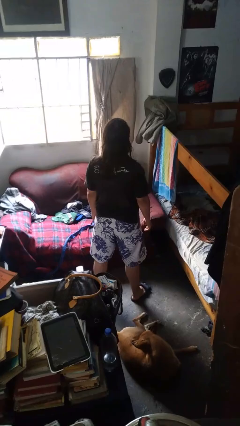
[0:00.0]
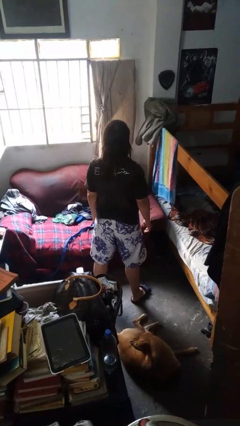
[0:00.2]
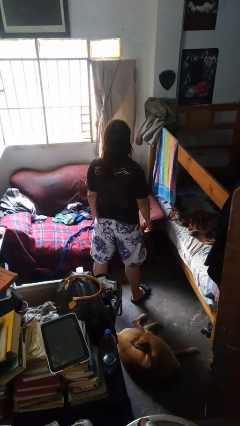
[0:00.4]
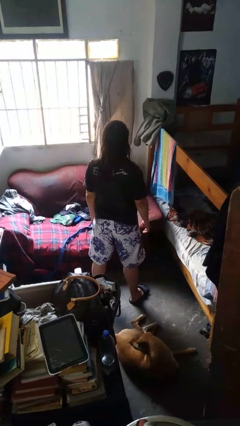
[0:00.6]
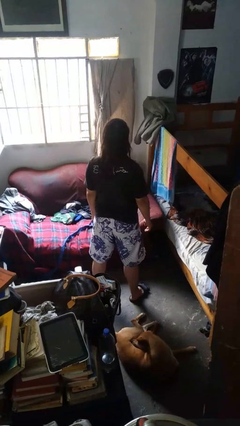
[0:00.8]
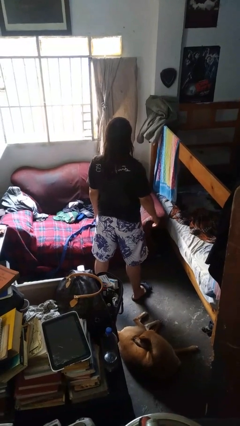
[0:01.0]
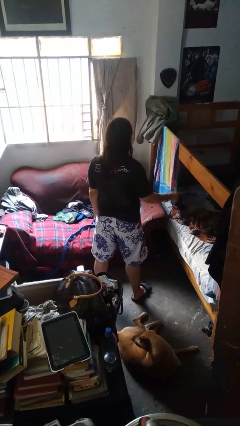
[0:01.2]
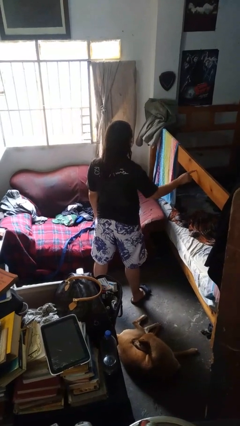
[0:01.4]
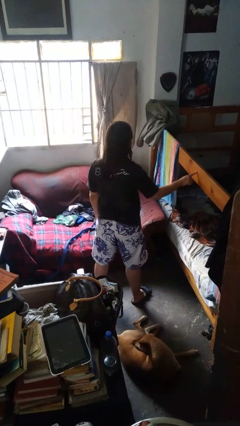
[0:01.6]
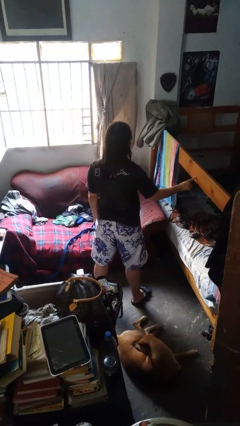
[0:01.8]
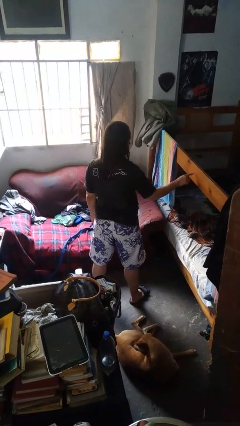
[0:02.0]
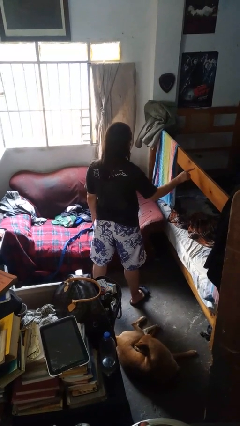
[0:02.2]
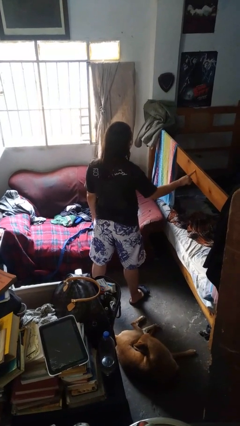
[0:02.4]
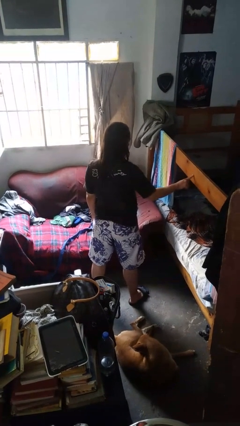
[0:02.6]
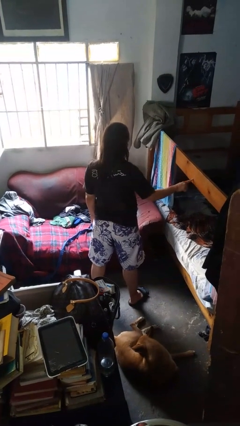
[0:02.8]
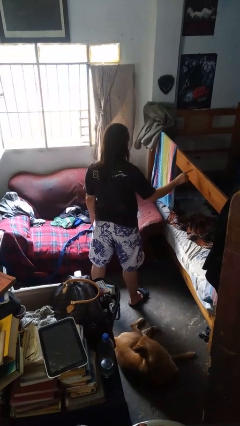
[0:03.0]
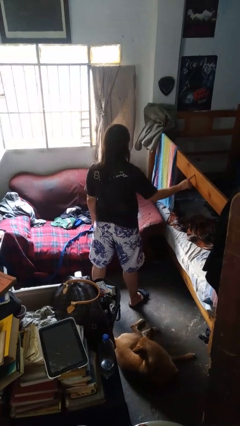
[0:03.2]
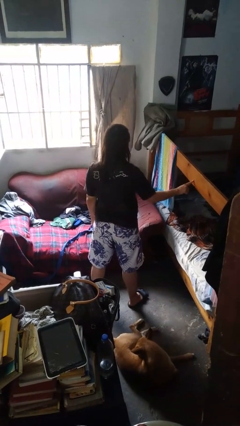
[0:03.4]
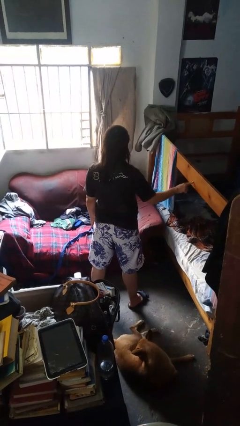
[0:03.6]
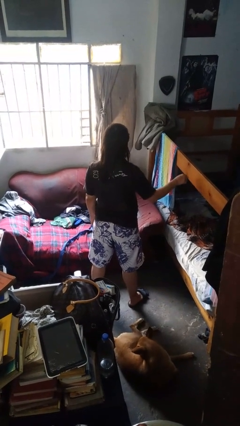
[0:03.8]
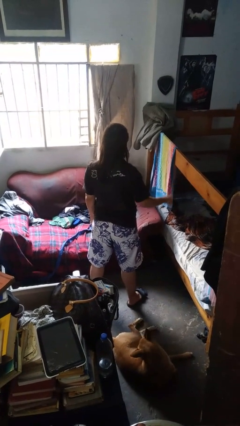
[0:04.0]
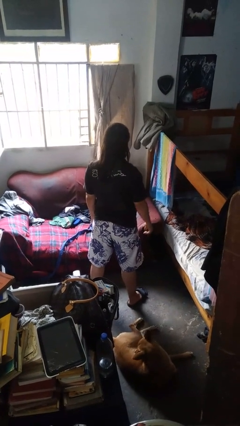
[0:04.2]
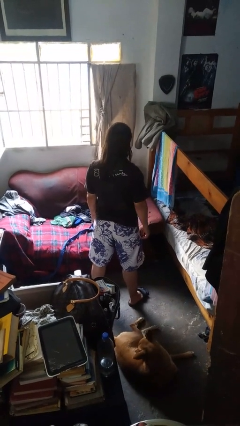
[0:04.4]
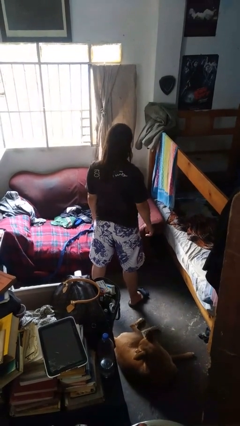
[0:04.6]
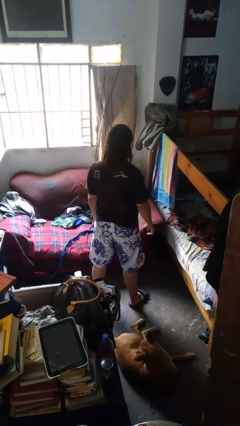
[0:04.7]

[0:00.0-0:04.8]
person taps object with finger

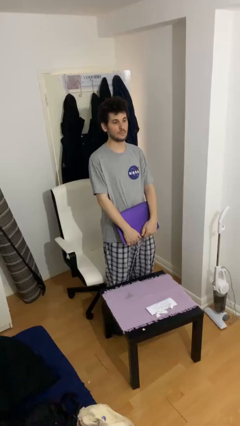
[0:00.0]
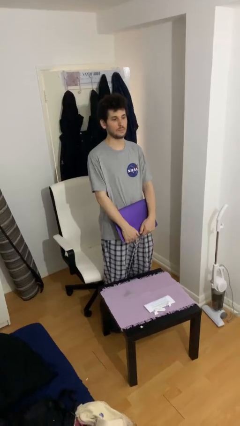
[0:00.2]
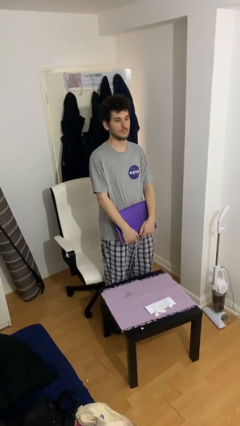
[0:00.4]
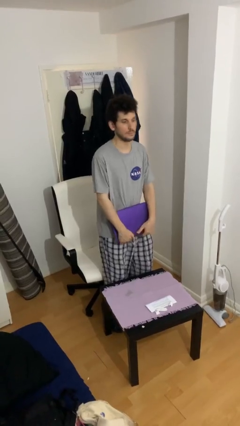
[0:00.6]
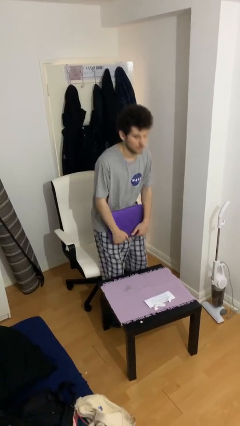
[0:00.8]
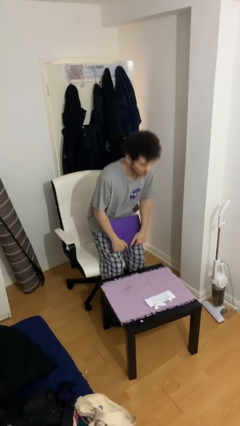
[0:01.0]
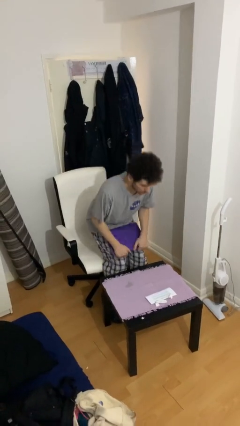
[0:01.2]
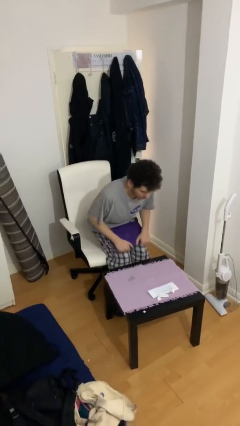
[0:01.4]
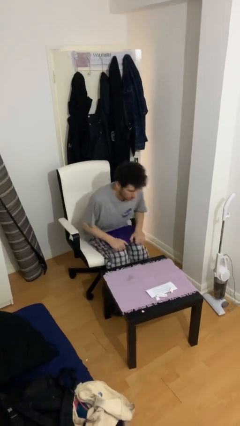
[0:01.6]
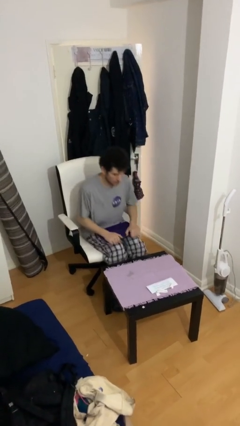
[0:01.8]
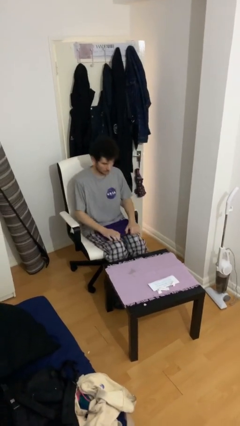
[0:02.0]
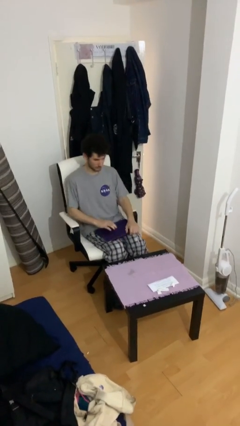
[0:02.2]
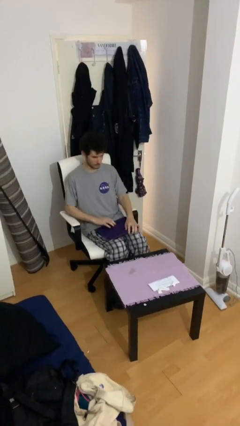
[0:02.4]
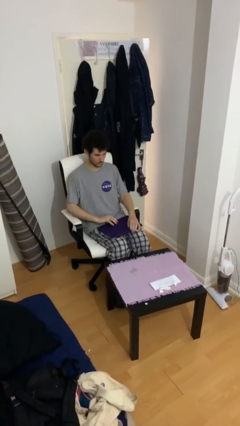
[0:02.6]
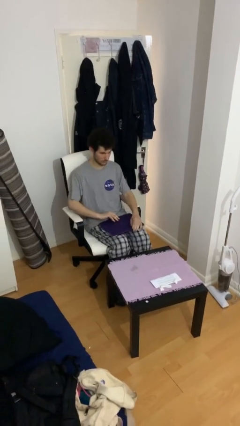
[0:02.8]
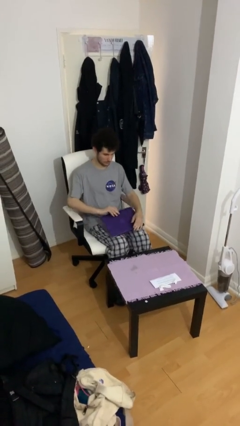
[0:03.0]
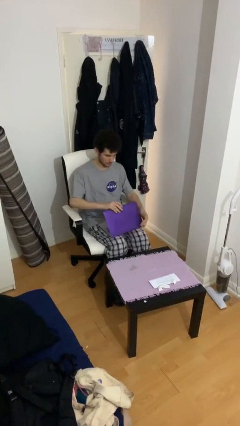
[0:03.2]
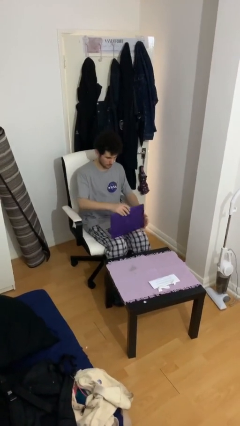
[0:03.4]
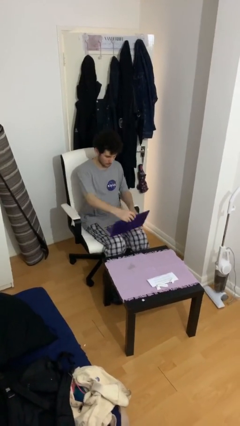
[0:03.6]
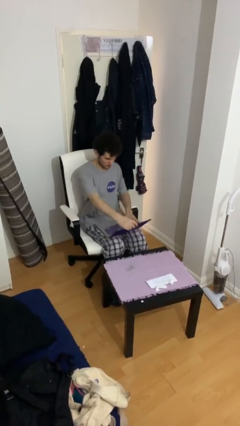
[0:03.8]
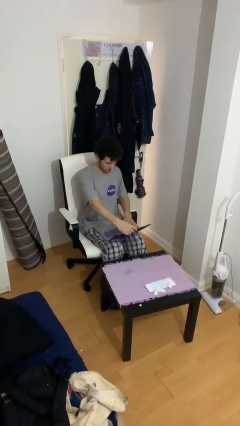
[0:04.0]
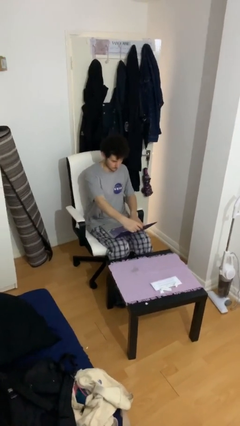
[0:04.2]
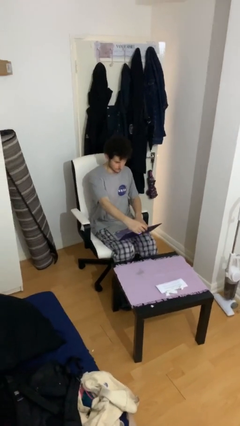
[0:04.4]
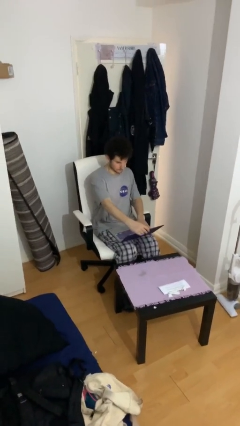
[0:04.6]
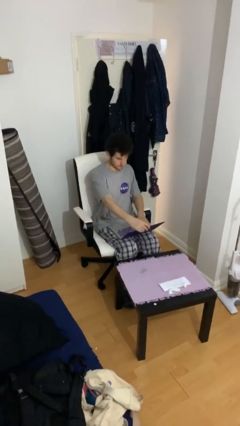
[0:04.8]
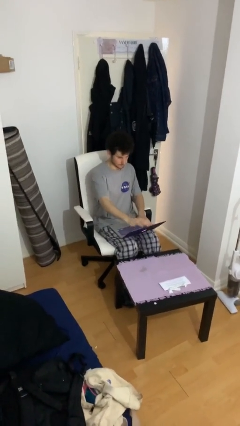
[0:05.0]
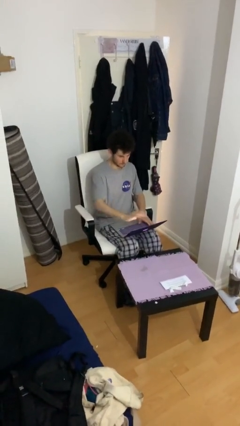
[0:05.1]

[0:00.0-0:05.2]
person sits down

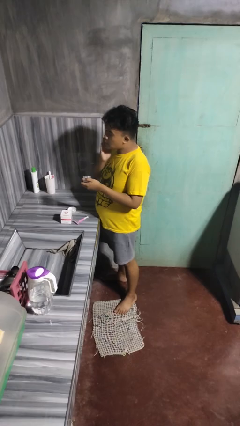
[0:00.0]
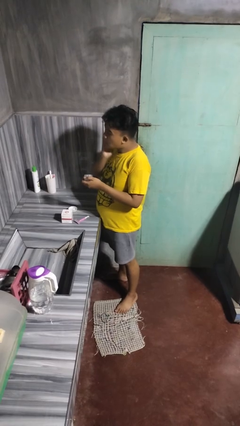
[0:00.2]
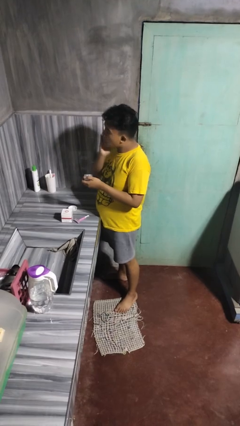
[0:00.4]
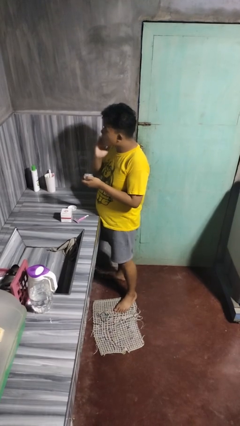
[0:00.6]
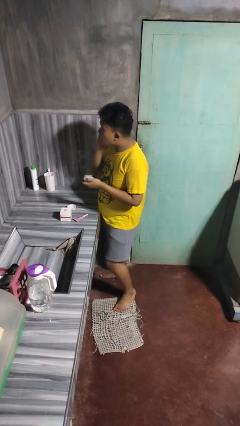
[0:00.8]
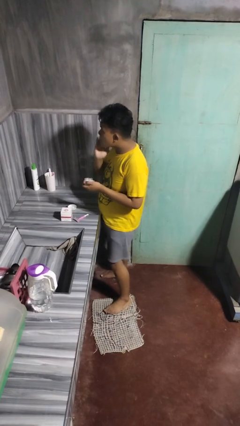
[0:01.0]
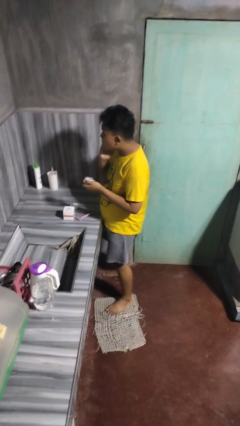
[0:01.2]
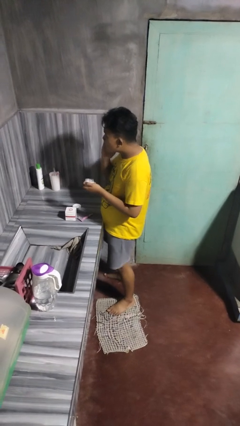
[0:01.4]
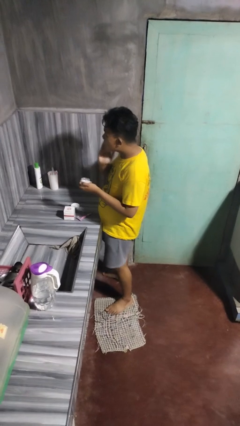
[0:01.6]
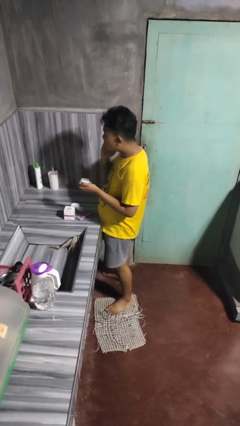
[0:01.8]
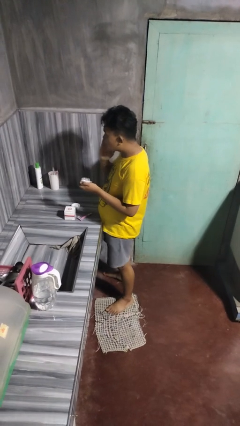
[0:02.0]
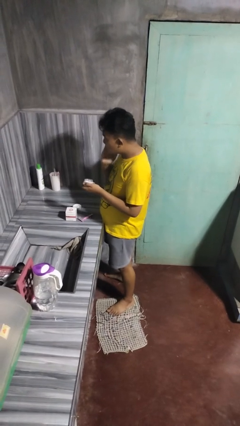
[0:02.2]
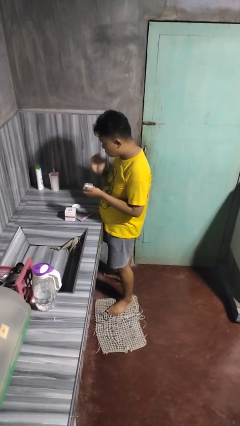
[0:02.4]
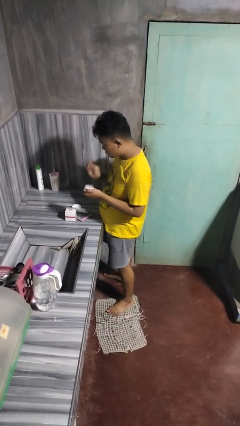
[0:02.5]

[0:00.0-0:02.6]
person applies shaving cream

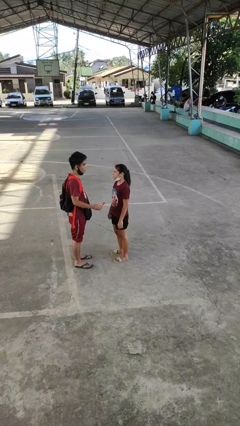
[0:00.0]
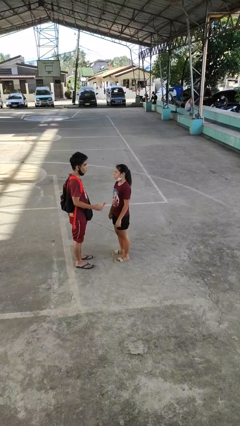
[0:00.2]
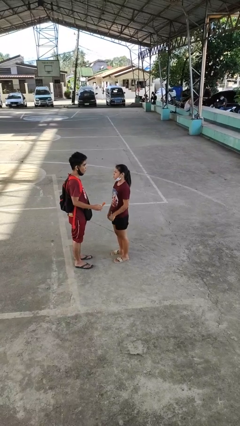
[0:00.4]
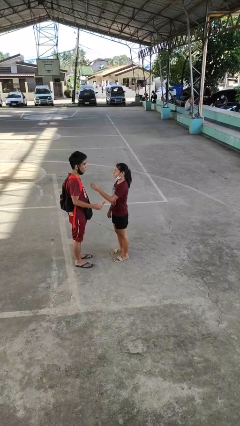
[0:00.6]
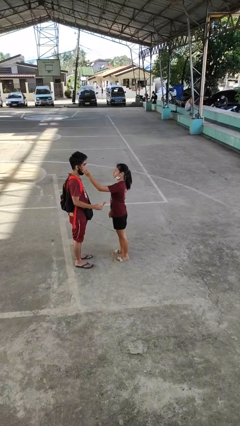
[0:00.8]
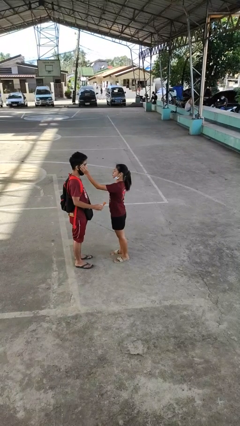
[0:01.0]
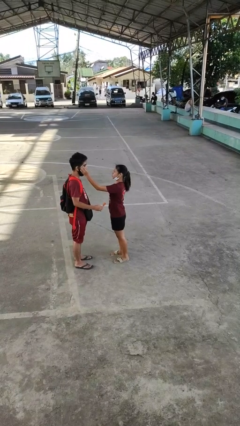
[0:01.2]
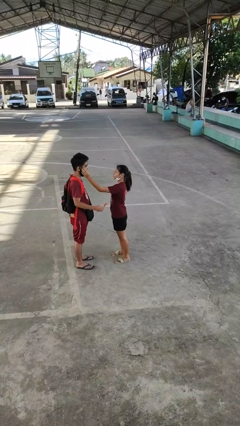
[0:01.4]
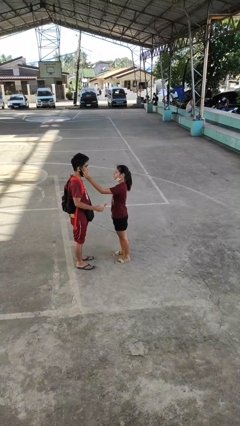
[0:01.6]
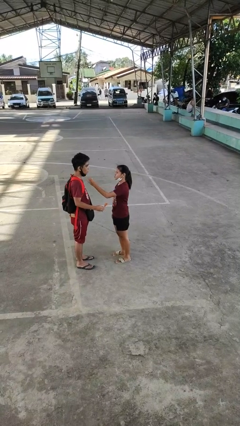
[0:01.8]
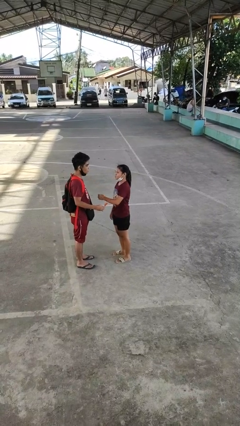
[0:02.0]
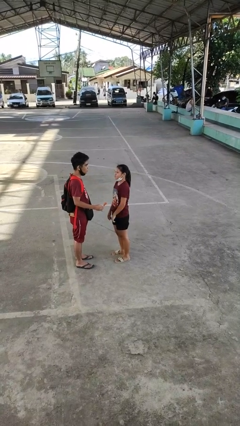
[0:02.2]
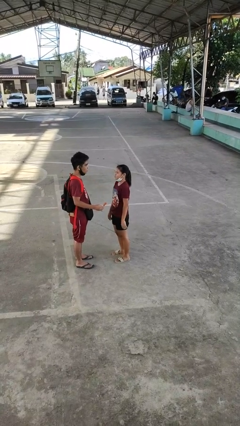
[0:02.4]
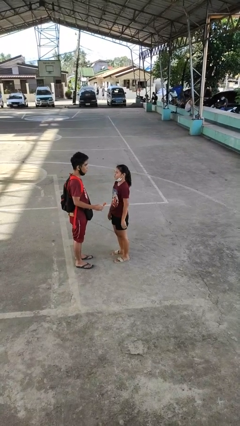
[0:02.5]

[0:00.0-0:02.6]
person touches face of person

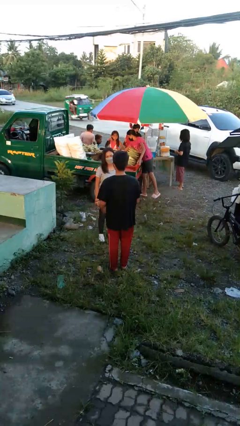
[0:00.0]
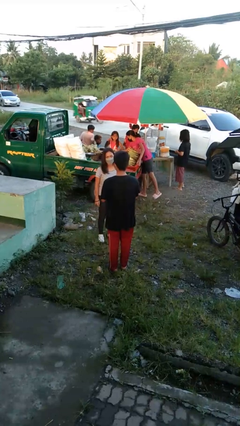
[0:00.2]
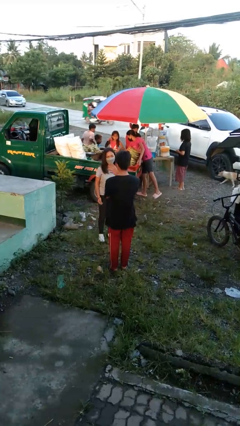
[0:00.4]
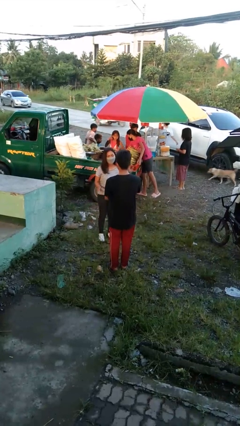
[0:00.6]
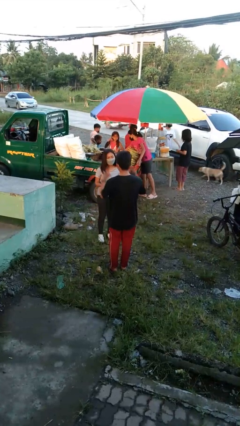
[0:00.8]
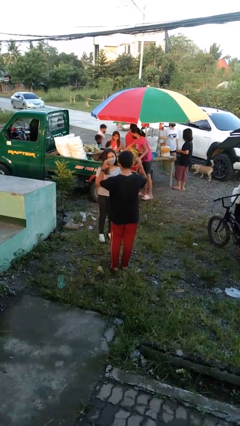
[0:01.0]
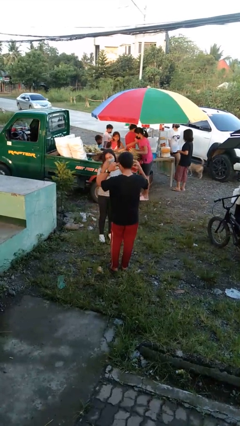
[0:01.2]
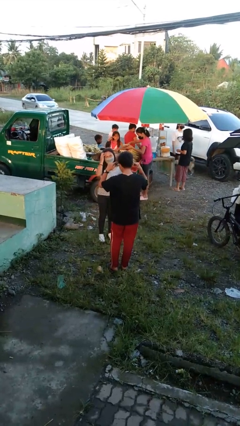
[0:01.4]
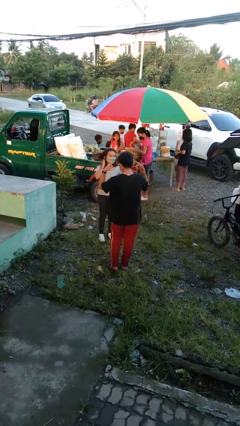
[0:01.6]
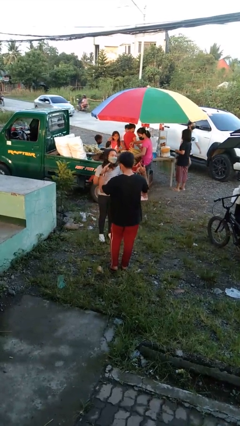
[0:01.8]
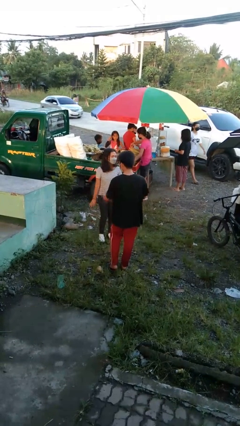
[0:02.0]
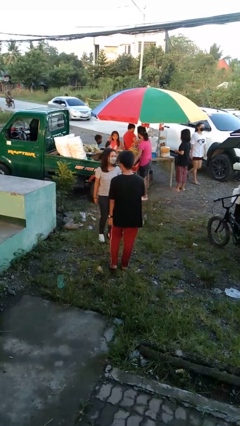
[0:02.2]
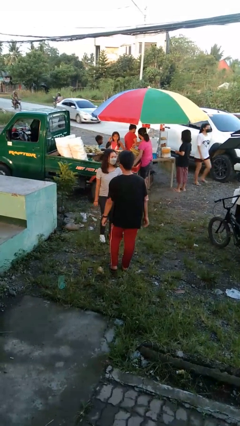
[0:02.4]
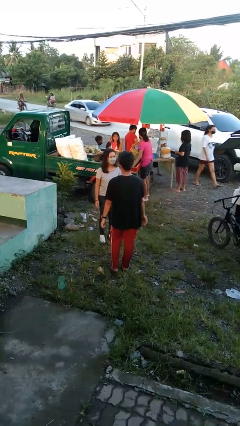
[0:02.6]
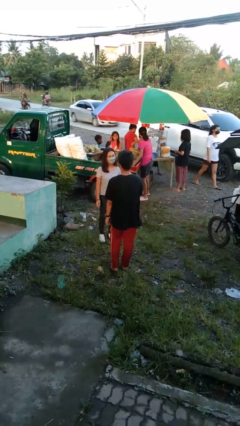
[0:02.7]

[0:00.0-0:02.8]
person talks to person
